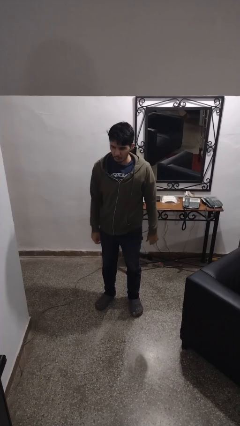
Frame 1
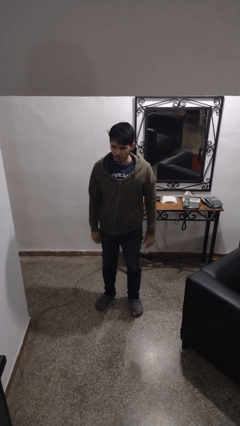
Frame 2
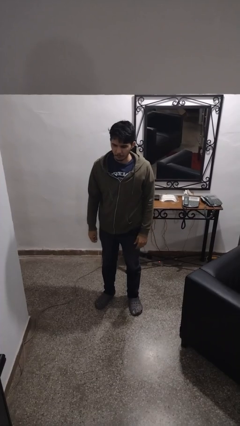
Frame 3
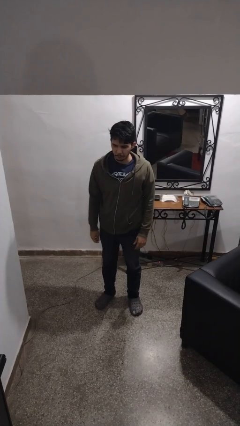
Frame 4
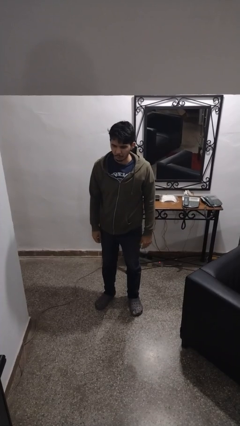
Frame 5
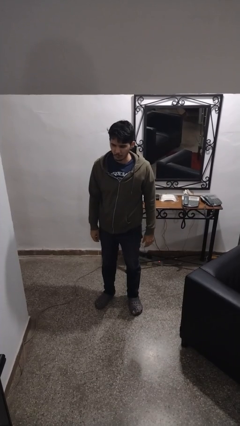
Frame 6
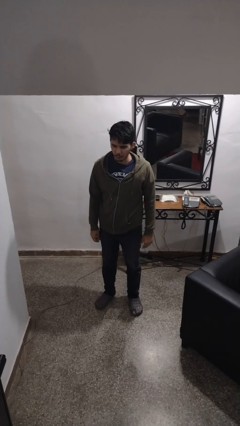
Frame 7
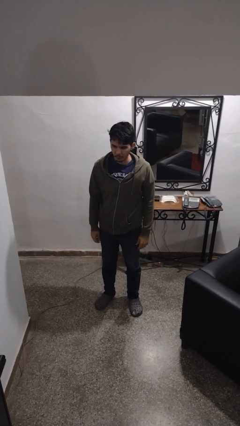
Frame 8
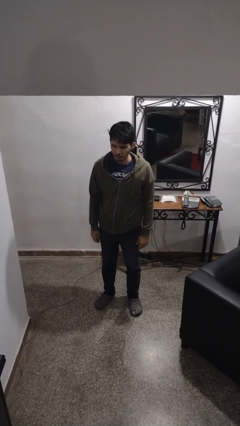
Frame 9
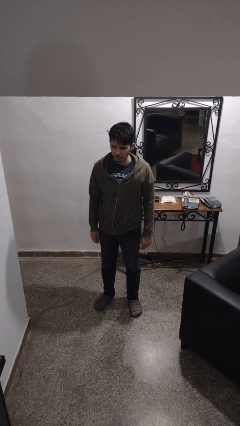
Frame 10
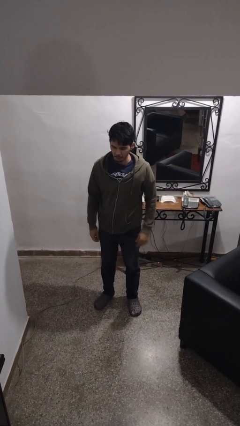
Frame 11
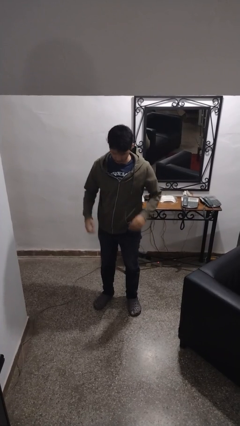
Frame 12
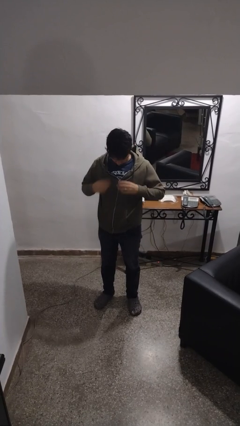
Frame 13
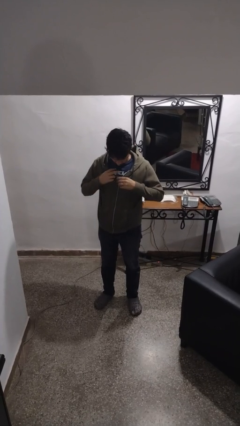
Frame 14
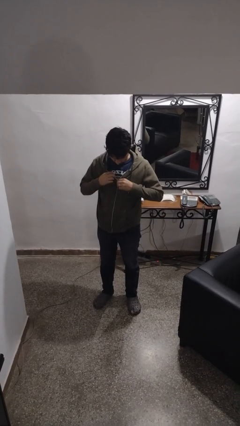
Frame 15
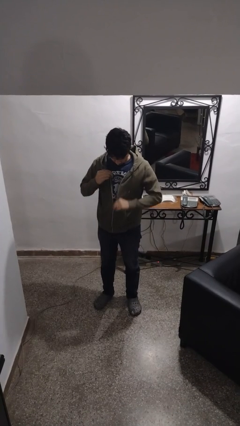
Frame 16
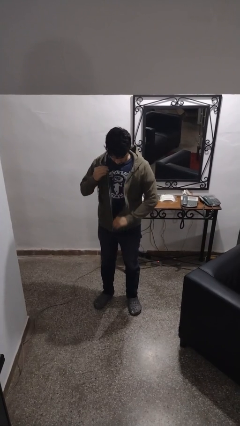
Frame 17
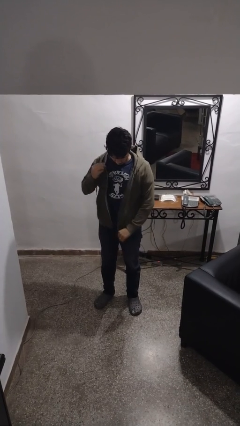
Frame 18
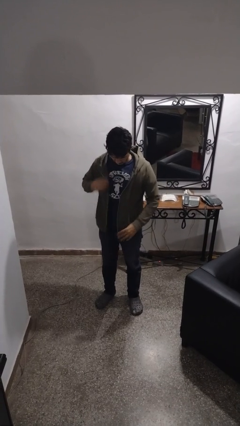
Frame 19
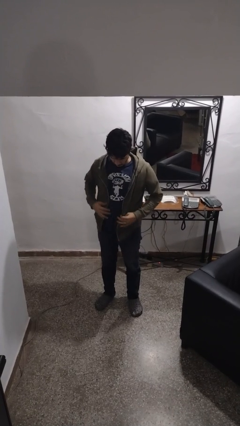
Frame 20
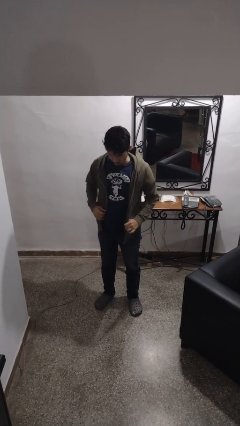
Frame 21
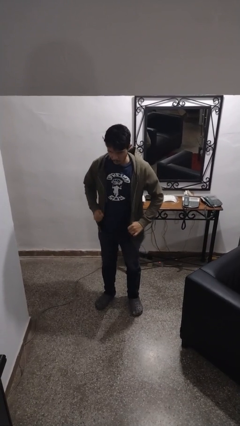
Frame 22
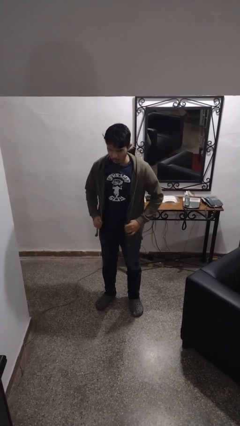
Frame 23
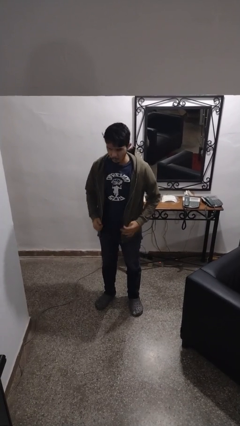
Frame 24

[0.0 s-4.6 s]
person unzips jacket

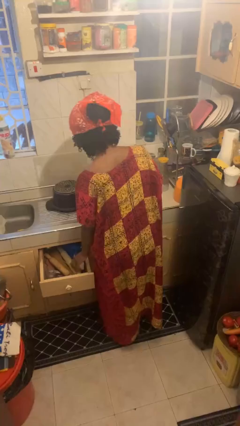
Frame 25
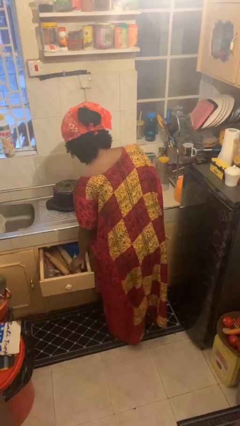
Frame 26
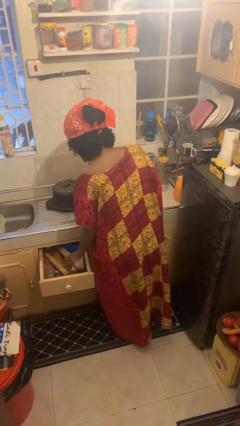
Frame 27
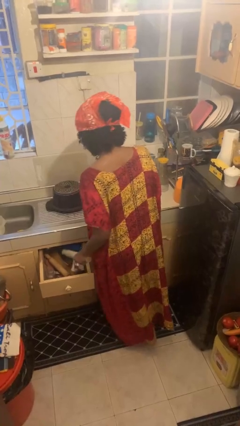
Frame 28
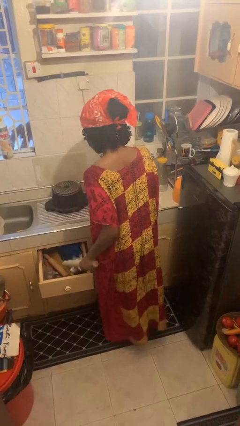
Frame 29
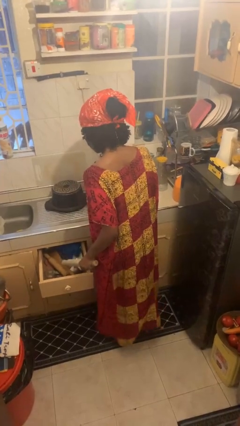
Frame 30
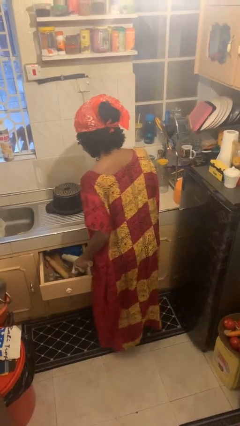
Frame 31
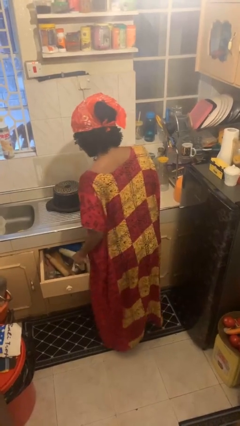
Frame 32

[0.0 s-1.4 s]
person takes object from kitchen drawer

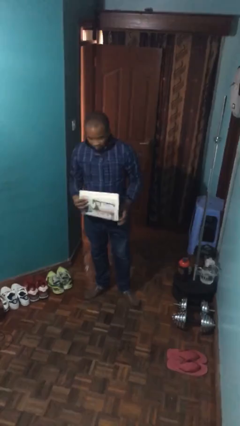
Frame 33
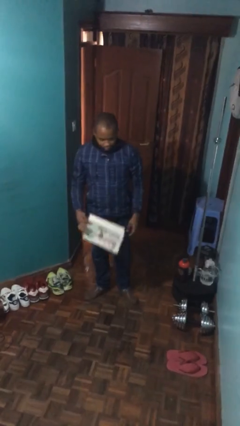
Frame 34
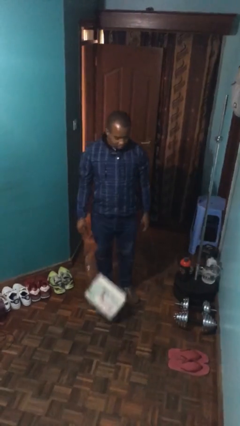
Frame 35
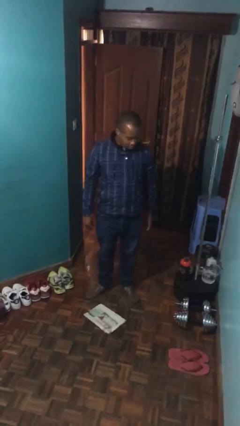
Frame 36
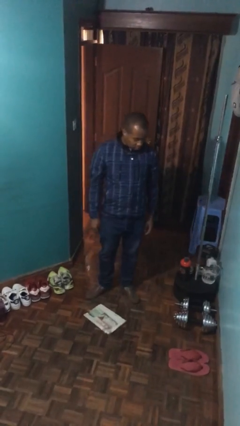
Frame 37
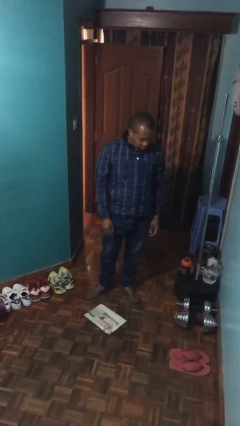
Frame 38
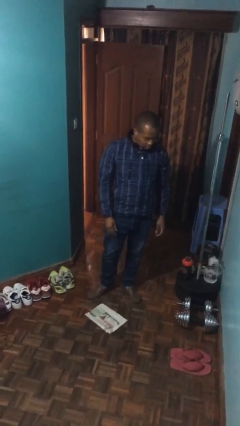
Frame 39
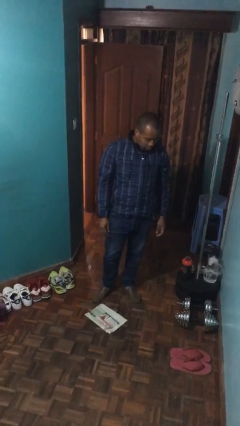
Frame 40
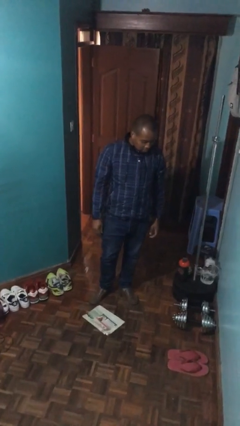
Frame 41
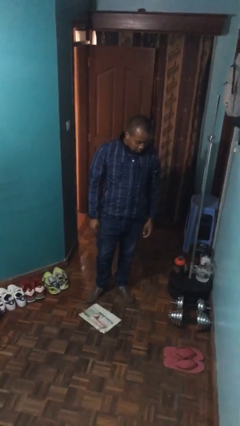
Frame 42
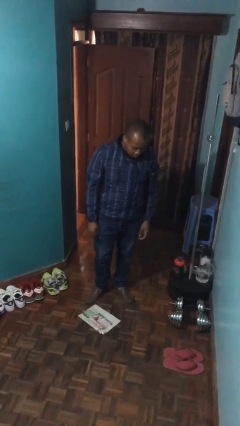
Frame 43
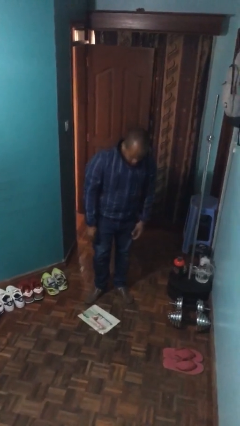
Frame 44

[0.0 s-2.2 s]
person drops object

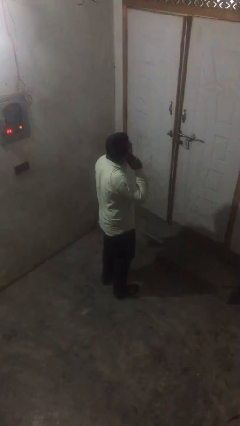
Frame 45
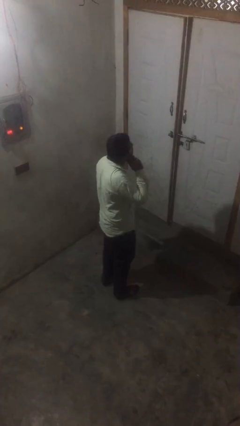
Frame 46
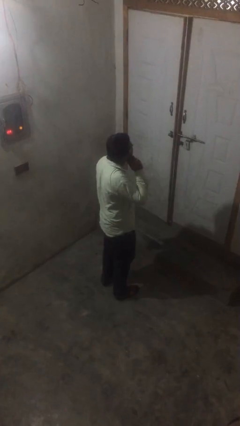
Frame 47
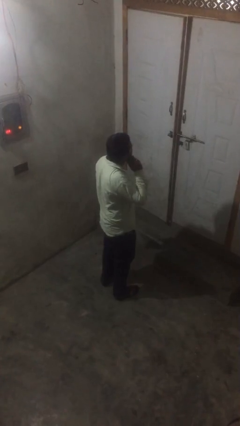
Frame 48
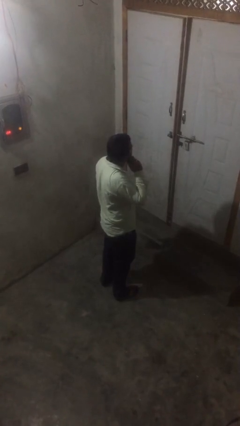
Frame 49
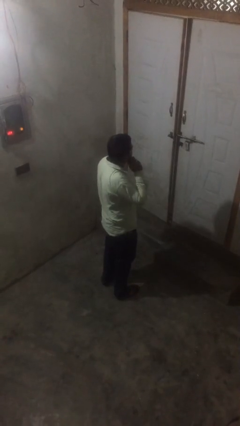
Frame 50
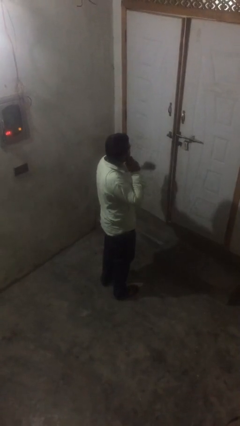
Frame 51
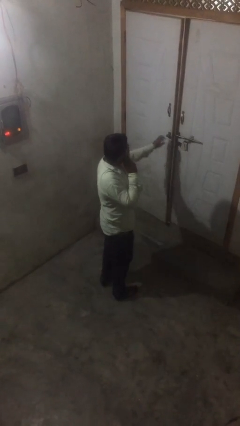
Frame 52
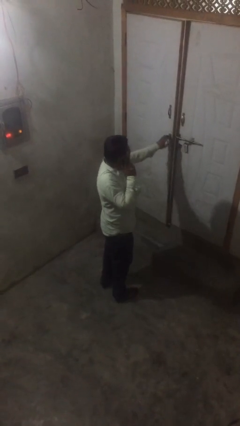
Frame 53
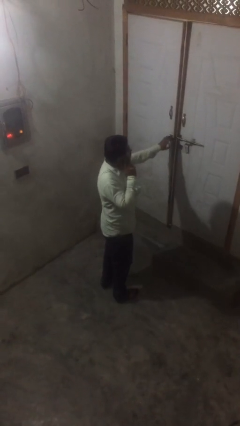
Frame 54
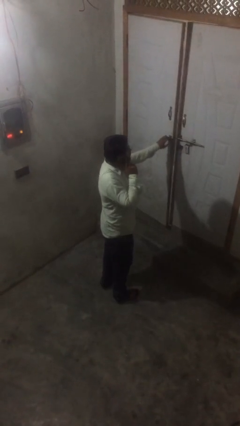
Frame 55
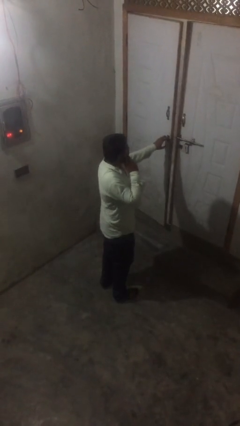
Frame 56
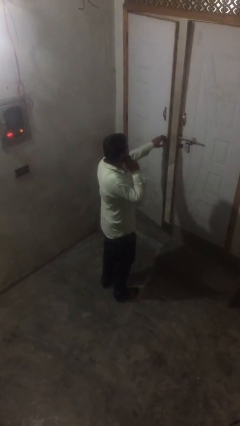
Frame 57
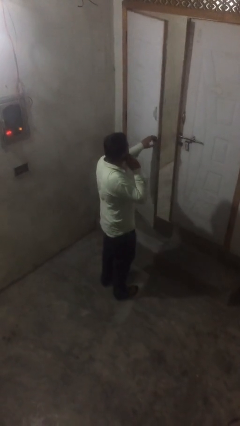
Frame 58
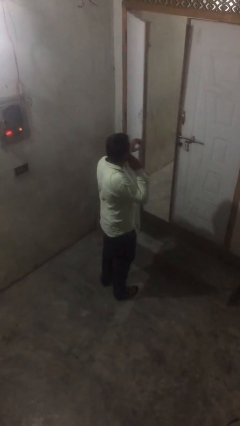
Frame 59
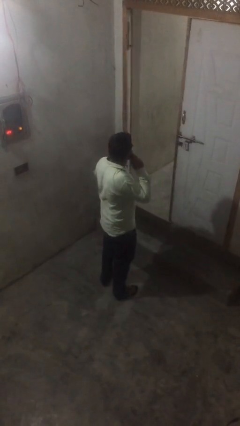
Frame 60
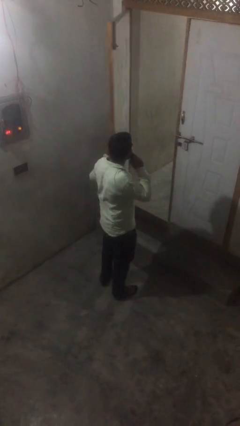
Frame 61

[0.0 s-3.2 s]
person opens facility door

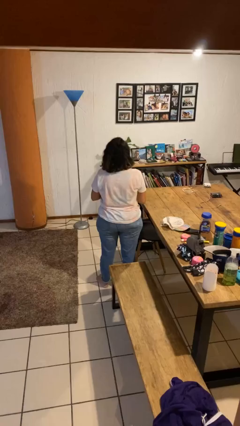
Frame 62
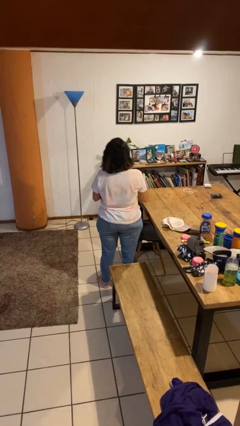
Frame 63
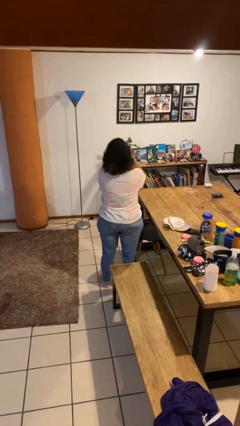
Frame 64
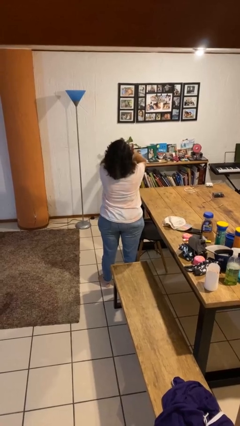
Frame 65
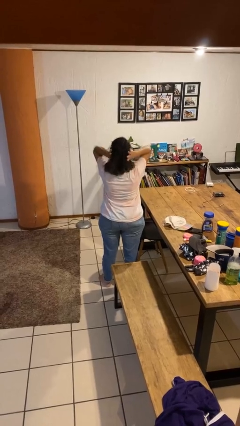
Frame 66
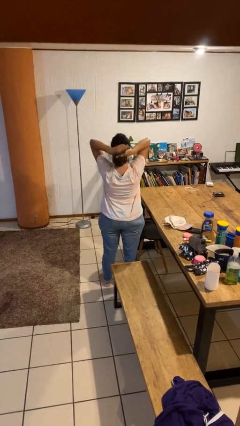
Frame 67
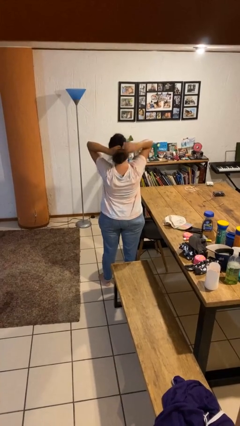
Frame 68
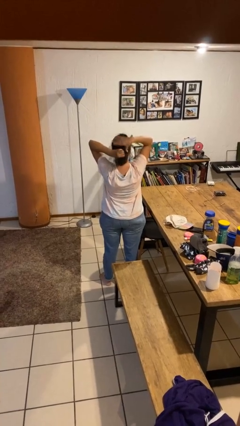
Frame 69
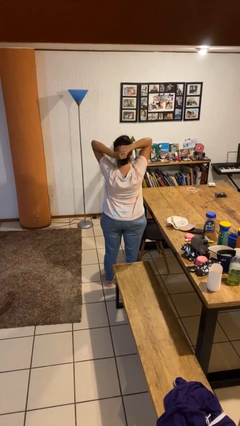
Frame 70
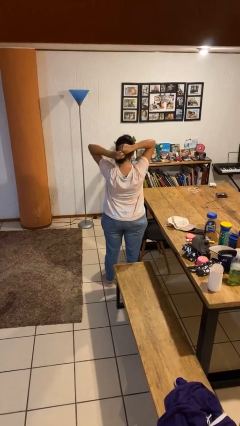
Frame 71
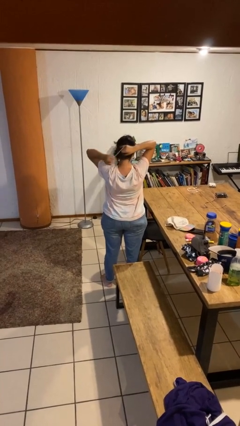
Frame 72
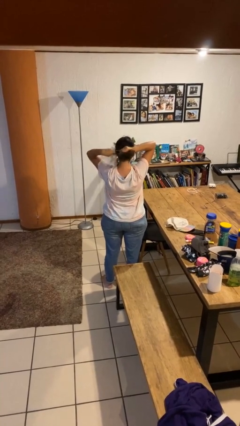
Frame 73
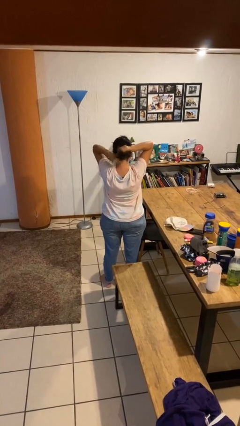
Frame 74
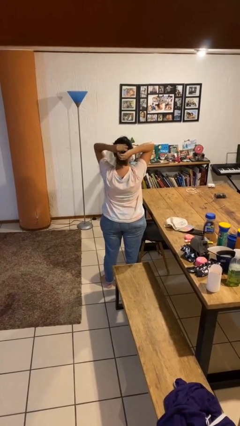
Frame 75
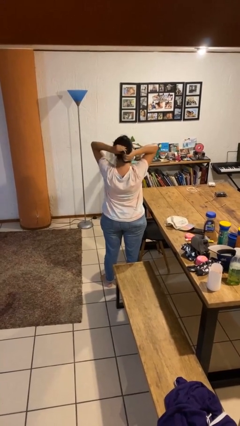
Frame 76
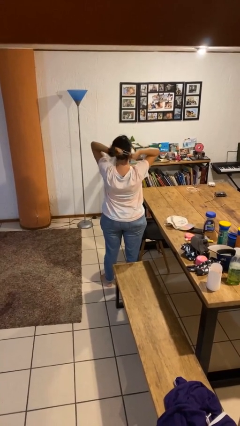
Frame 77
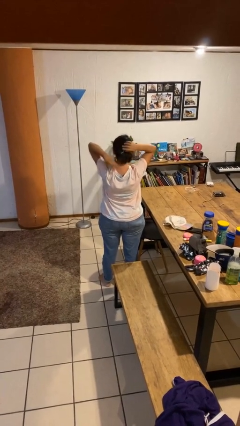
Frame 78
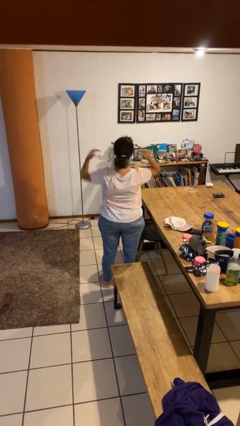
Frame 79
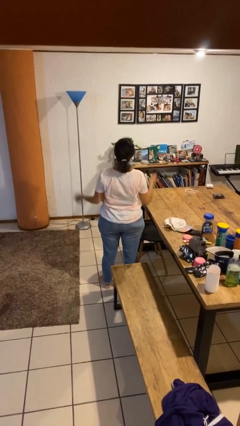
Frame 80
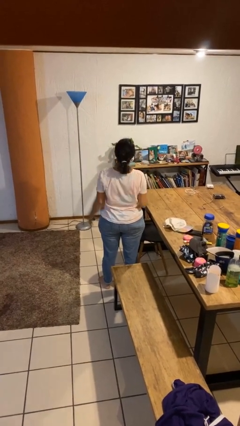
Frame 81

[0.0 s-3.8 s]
person puts hair in ponytail

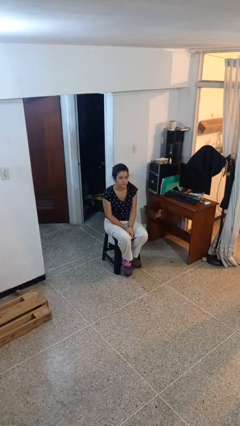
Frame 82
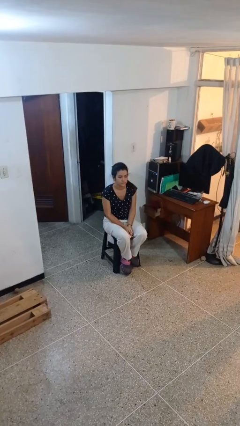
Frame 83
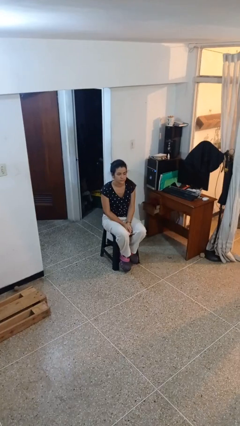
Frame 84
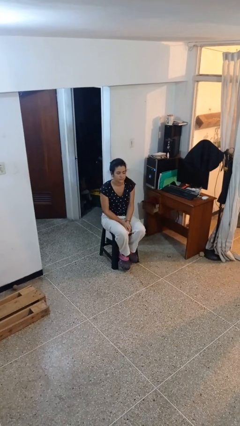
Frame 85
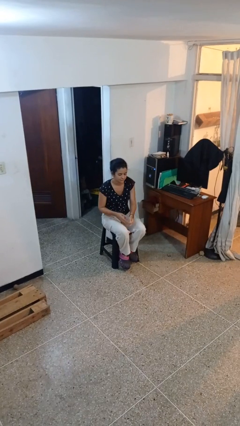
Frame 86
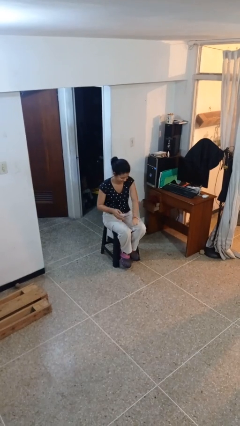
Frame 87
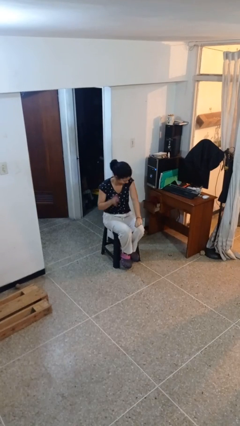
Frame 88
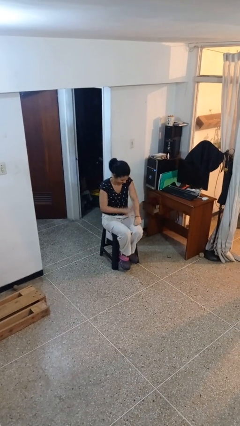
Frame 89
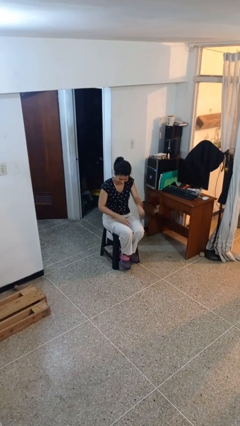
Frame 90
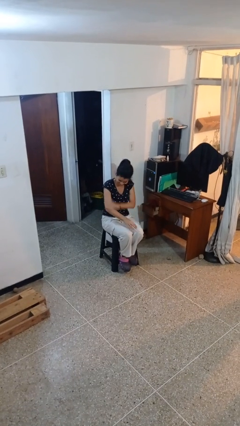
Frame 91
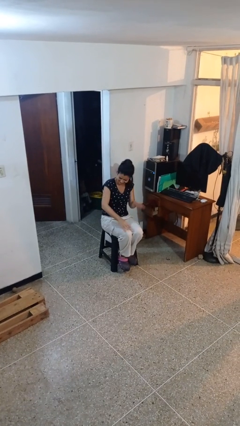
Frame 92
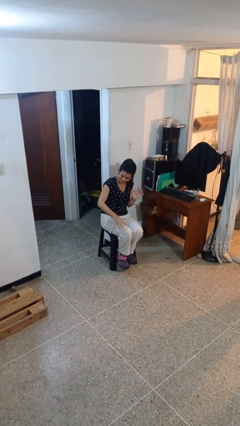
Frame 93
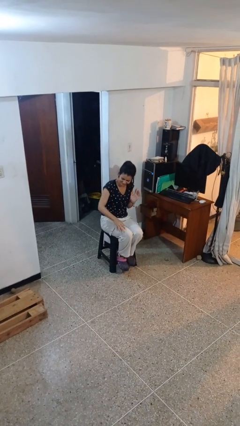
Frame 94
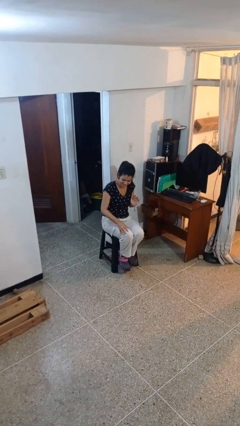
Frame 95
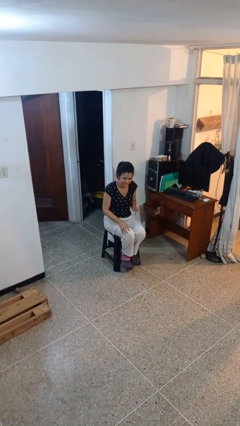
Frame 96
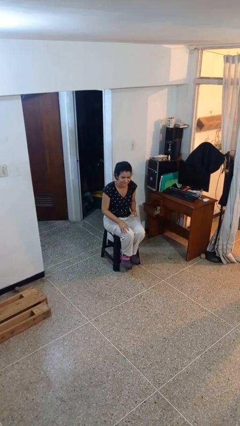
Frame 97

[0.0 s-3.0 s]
person swats bug
